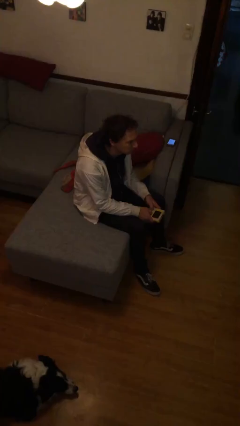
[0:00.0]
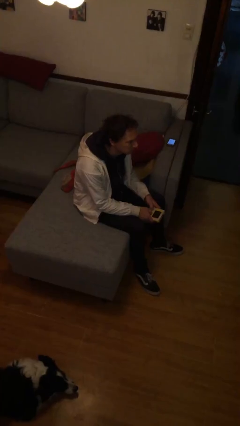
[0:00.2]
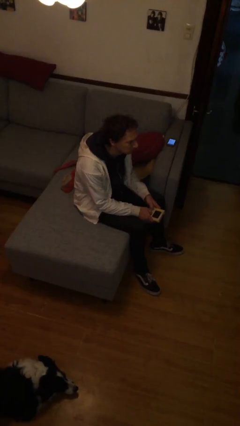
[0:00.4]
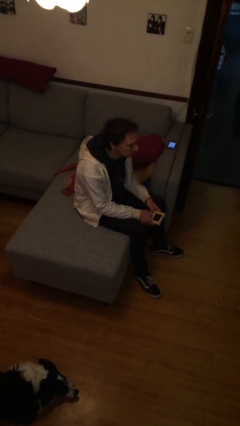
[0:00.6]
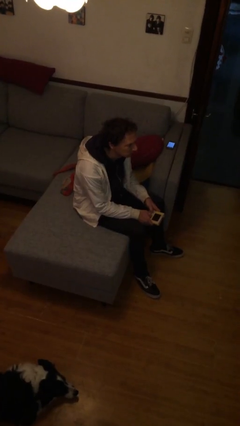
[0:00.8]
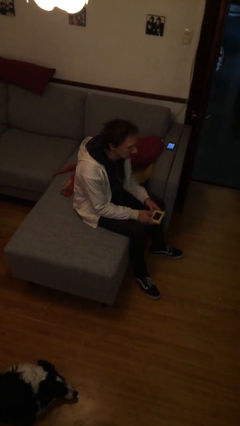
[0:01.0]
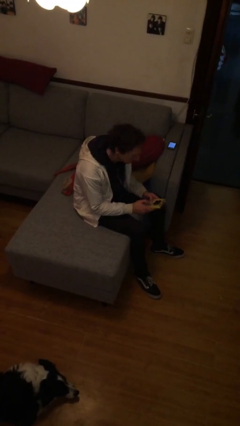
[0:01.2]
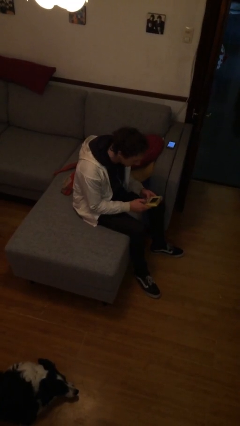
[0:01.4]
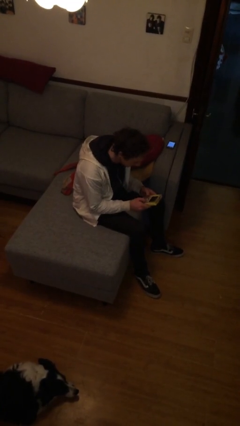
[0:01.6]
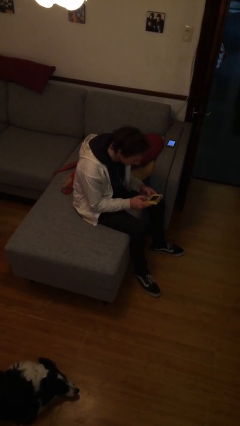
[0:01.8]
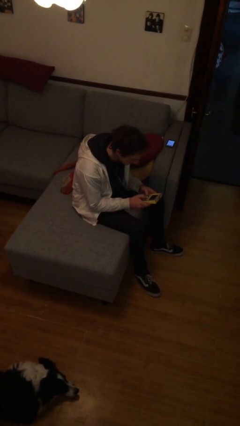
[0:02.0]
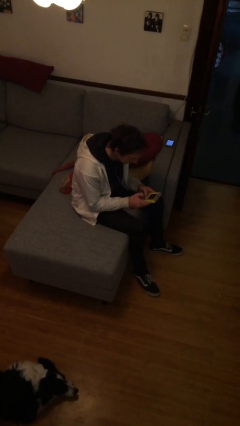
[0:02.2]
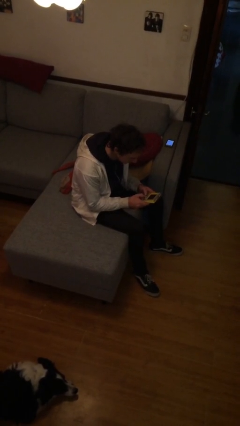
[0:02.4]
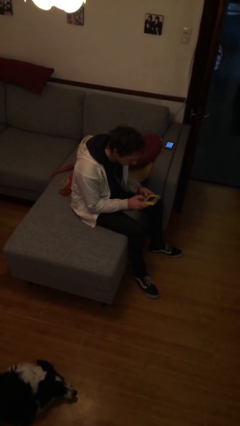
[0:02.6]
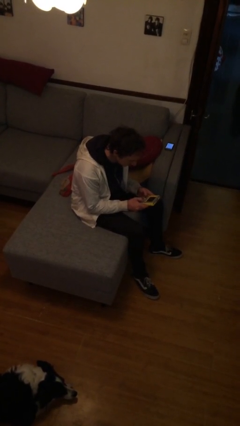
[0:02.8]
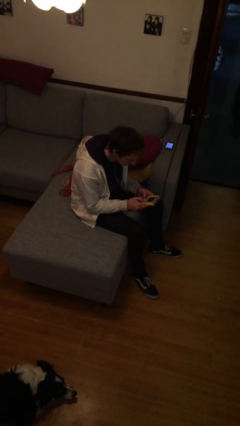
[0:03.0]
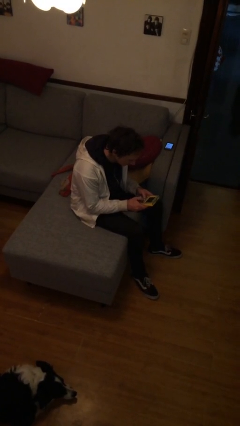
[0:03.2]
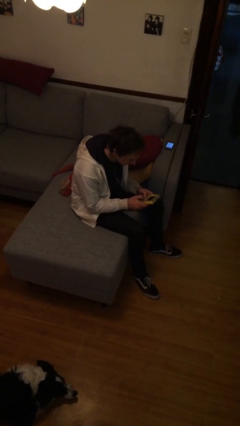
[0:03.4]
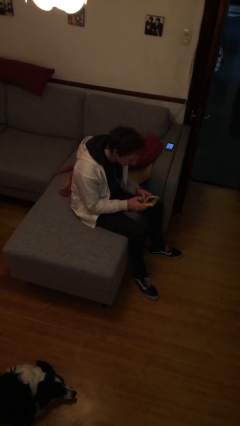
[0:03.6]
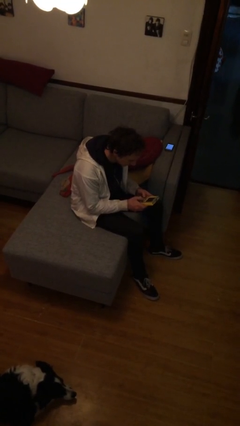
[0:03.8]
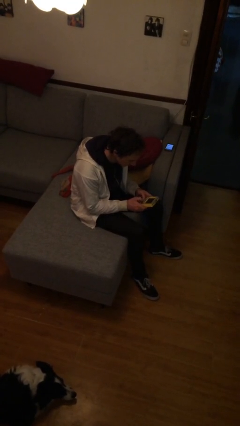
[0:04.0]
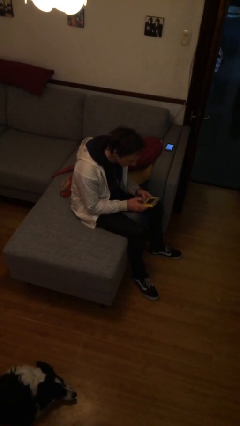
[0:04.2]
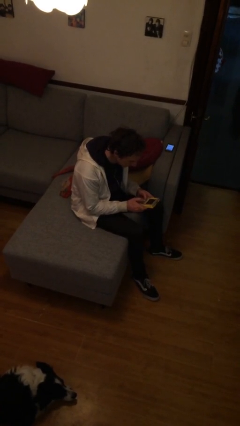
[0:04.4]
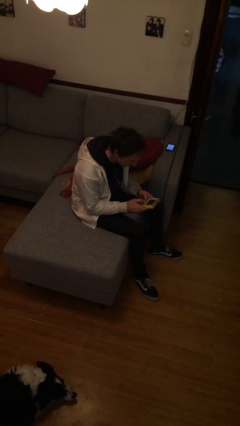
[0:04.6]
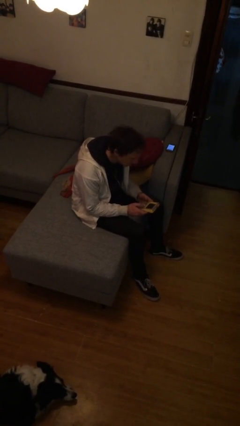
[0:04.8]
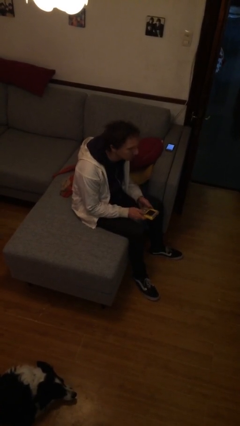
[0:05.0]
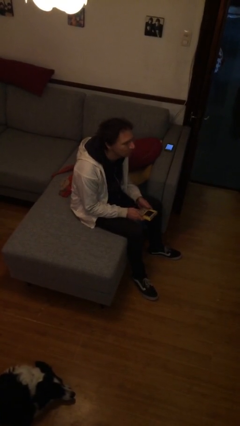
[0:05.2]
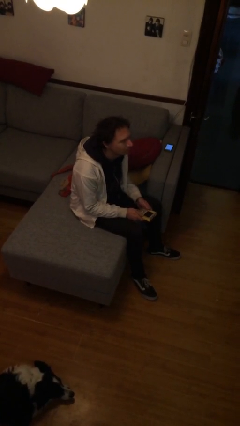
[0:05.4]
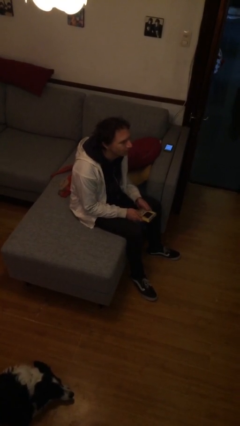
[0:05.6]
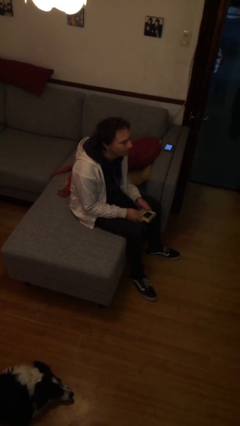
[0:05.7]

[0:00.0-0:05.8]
person interacts with handheld game

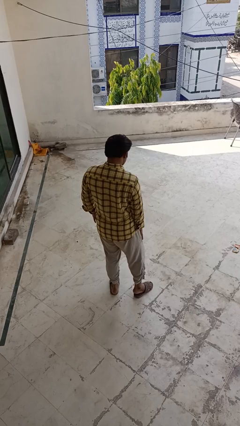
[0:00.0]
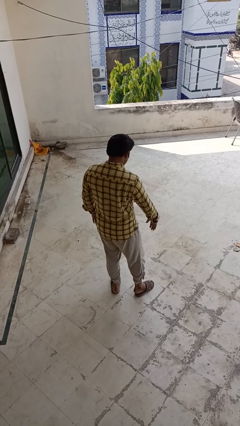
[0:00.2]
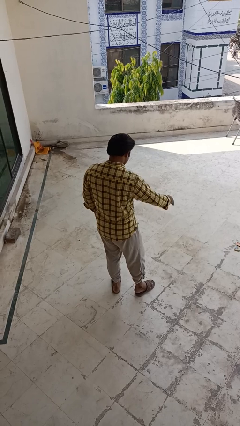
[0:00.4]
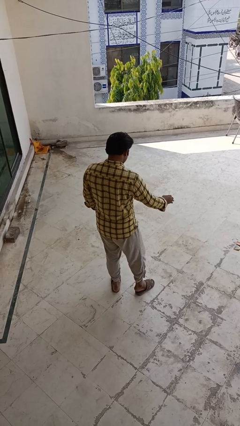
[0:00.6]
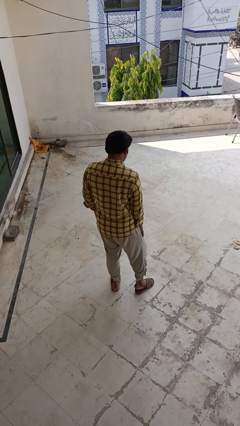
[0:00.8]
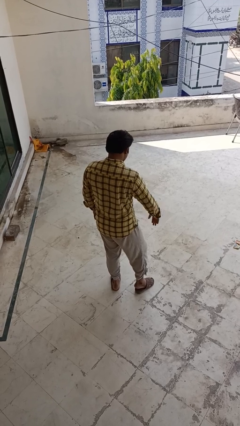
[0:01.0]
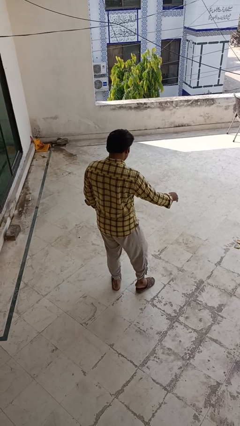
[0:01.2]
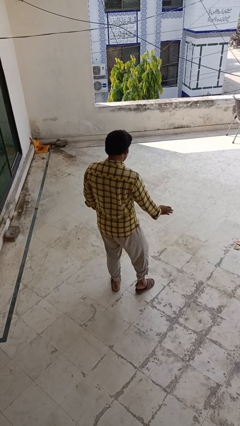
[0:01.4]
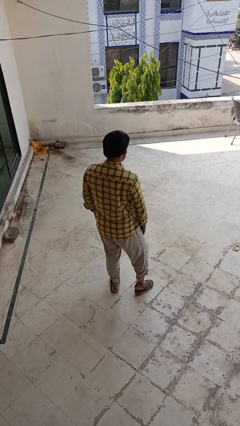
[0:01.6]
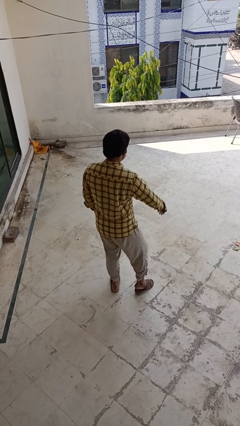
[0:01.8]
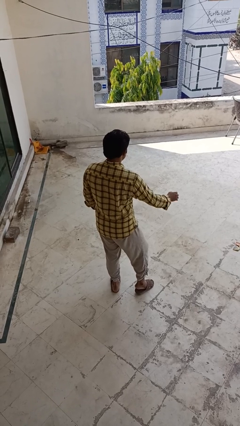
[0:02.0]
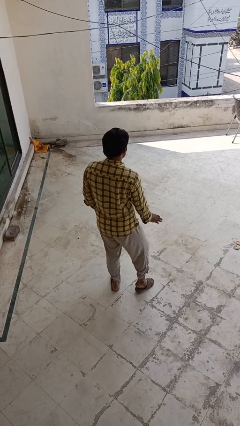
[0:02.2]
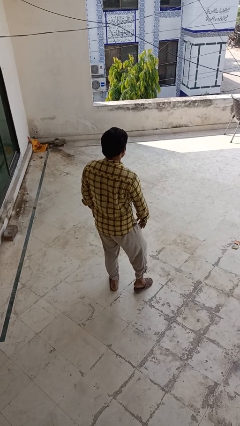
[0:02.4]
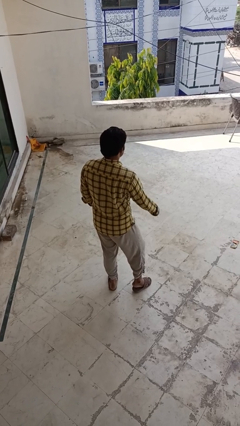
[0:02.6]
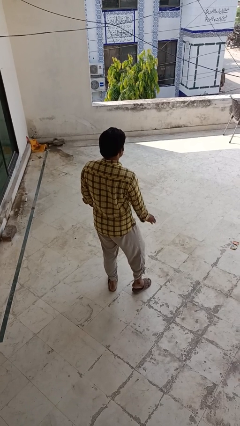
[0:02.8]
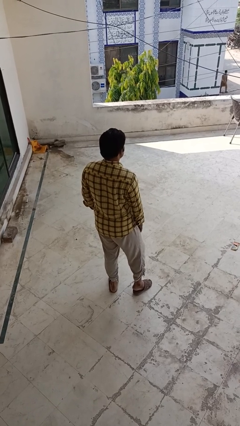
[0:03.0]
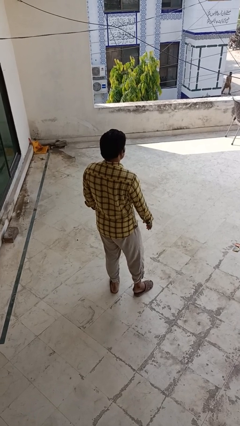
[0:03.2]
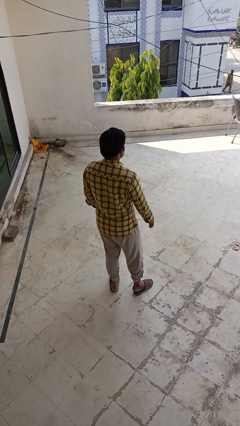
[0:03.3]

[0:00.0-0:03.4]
person slaps hands on thighs

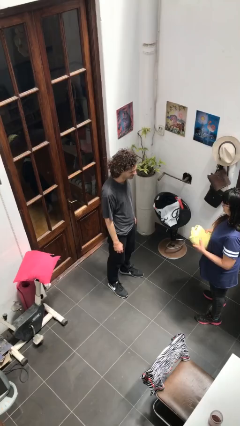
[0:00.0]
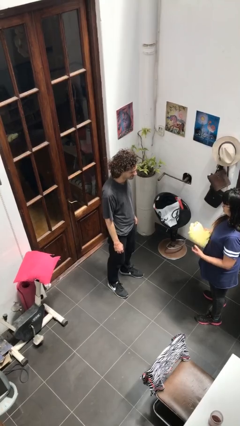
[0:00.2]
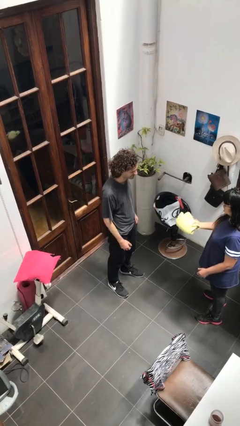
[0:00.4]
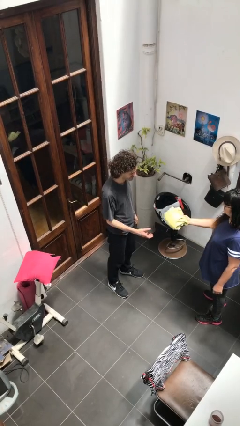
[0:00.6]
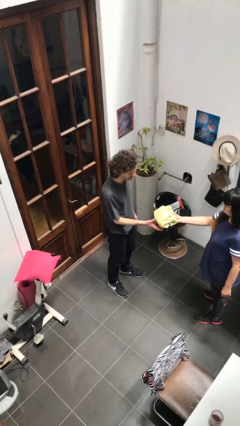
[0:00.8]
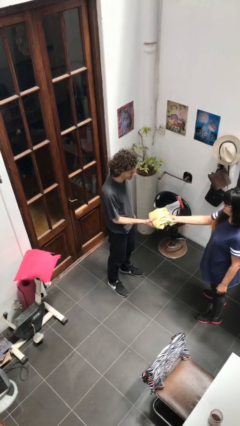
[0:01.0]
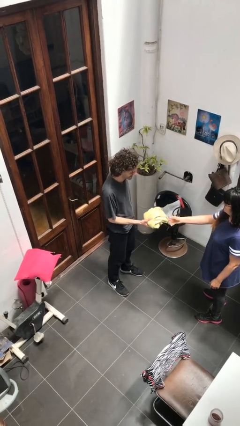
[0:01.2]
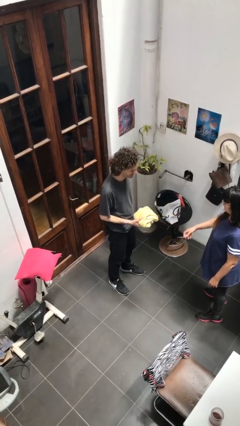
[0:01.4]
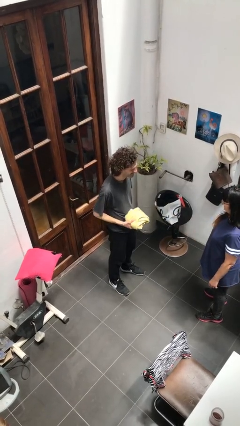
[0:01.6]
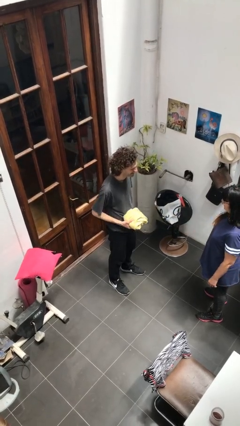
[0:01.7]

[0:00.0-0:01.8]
person transfers object to person

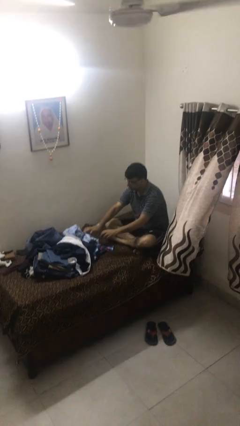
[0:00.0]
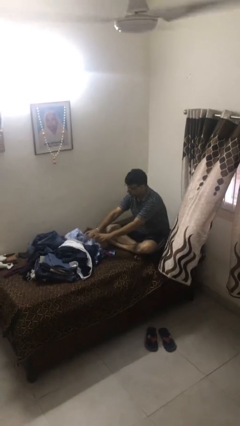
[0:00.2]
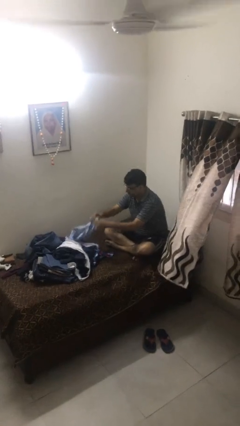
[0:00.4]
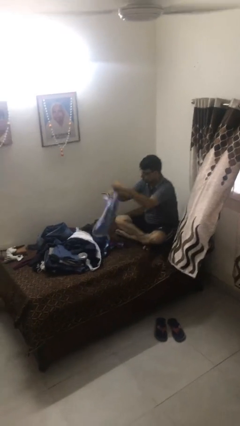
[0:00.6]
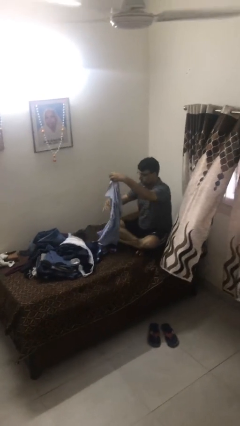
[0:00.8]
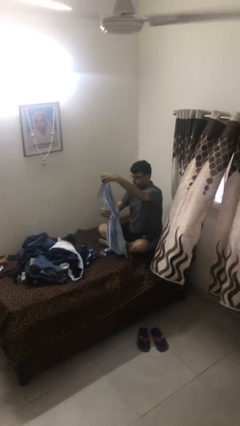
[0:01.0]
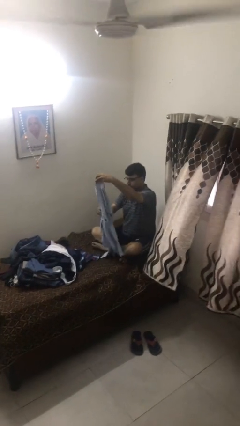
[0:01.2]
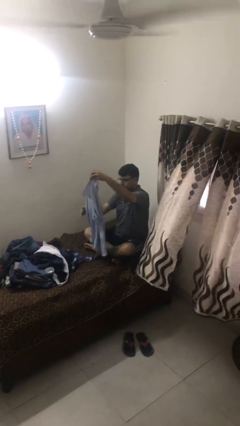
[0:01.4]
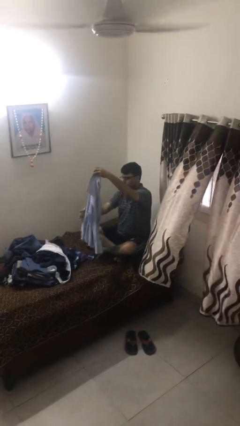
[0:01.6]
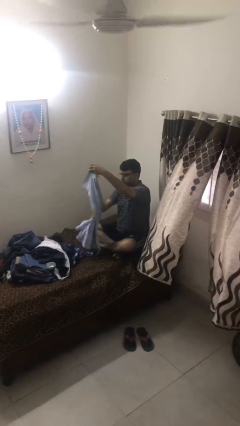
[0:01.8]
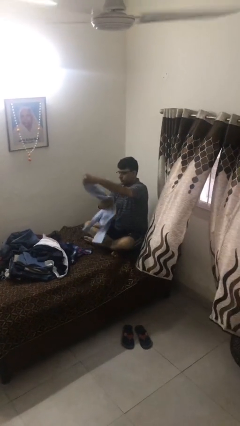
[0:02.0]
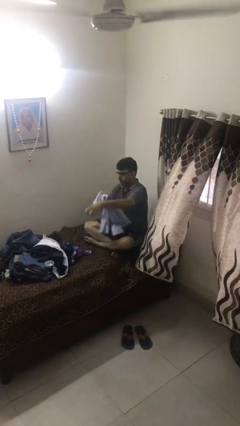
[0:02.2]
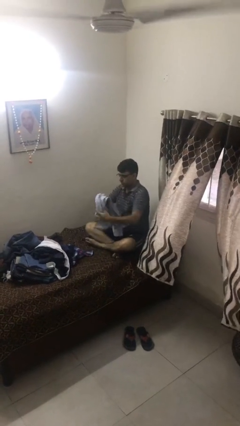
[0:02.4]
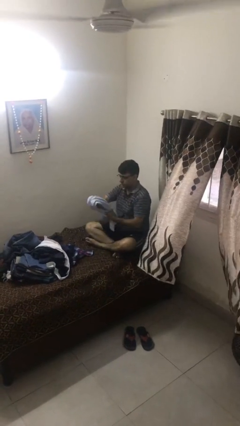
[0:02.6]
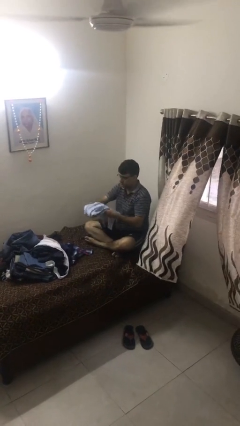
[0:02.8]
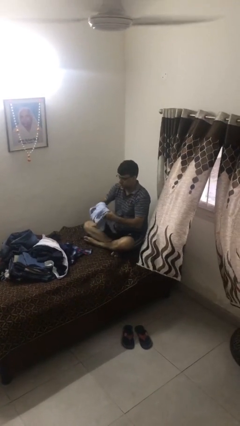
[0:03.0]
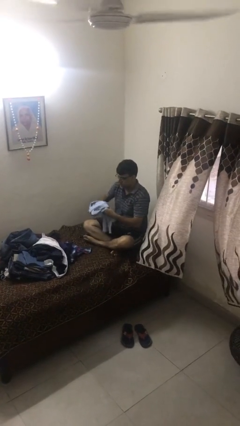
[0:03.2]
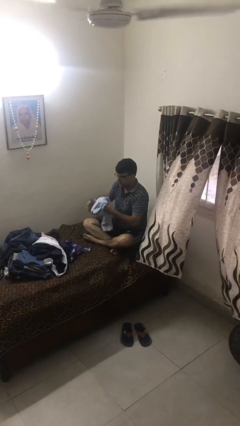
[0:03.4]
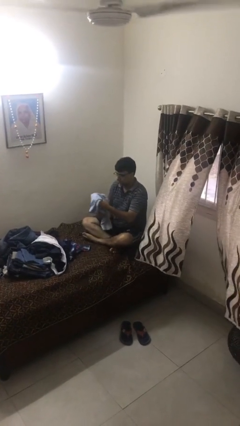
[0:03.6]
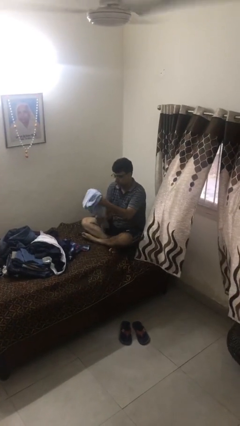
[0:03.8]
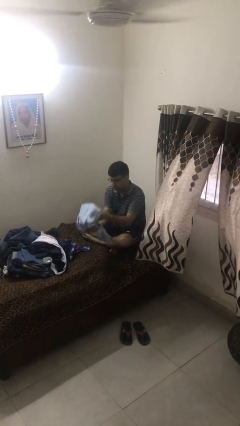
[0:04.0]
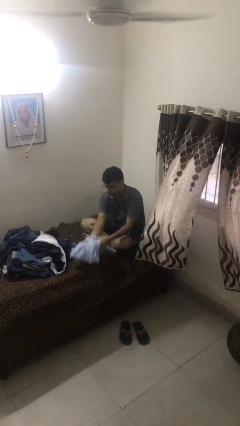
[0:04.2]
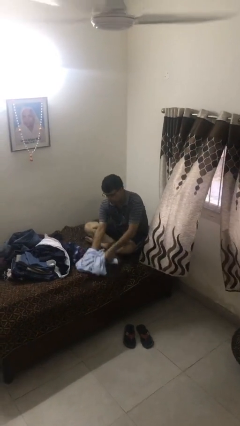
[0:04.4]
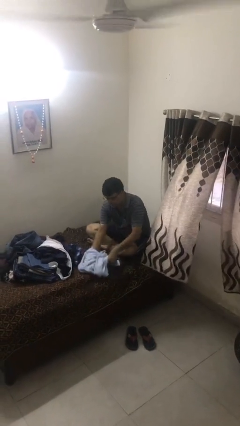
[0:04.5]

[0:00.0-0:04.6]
person folds shirt

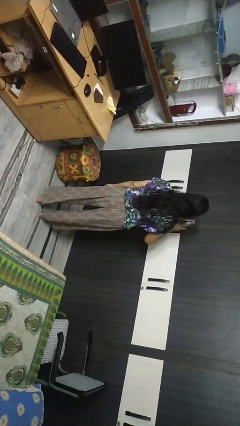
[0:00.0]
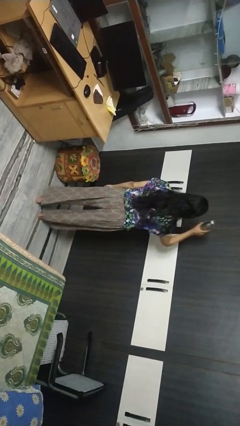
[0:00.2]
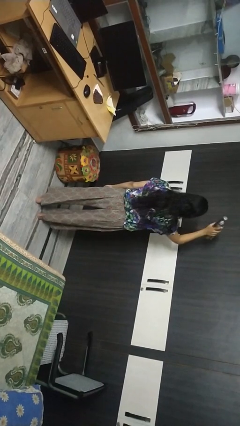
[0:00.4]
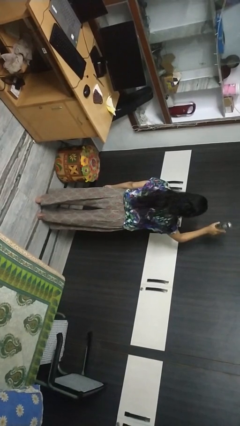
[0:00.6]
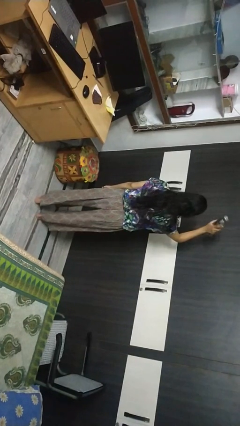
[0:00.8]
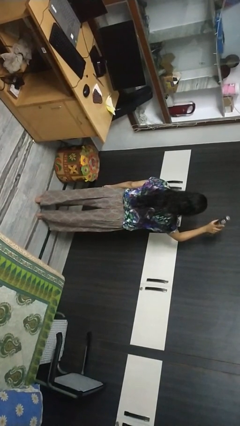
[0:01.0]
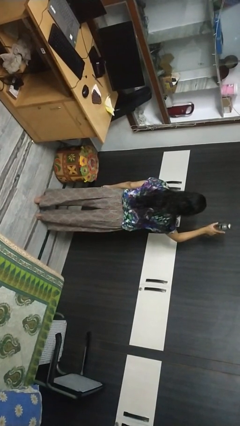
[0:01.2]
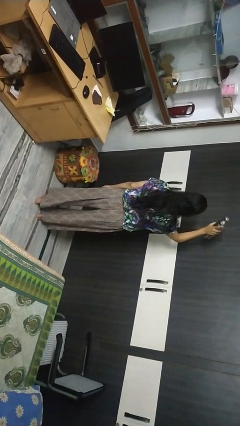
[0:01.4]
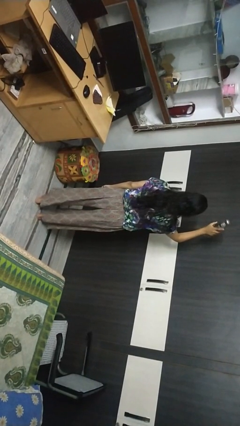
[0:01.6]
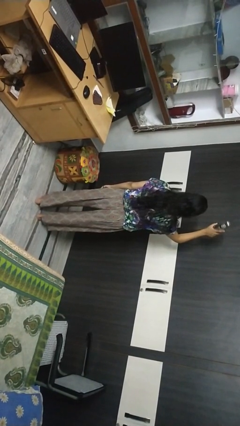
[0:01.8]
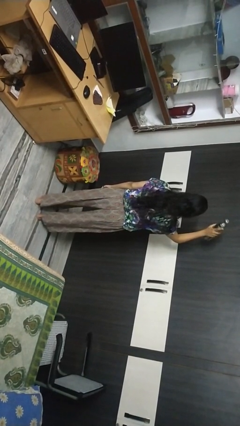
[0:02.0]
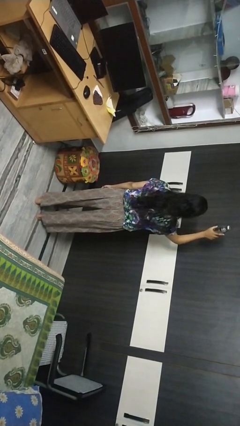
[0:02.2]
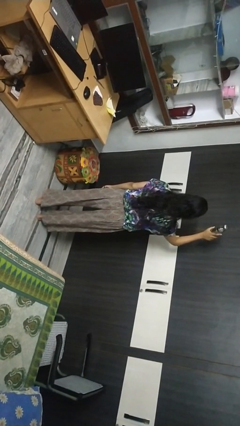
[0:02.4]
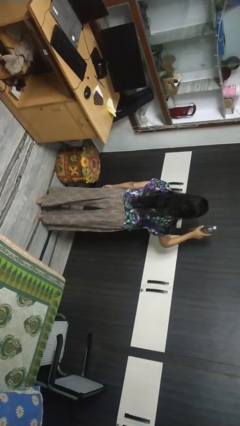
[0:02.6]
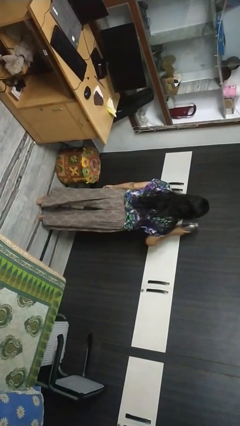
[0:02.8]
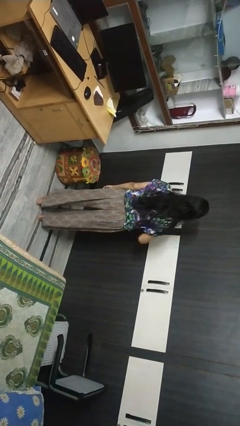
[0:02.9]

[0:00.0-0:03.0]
person holds object above head
